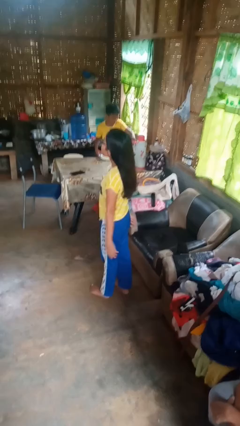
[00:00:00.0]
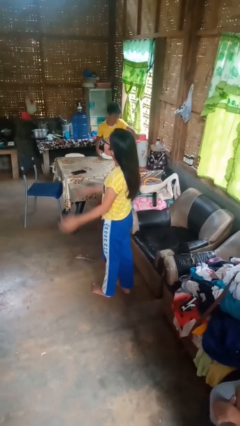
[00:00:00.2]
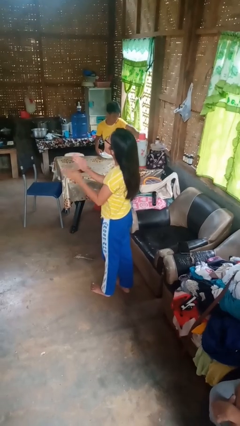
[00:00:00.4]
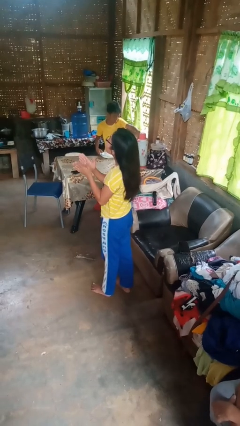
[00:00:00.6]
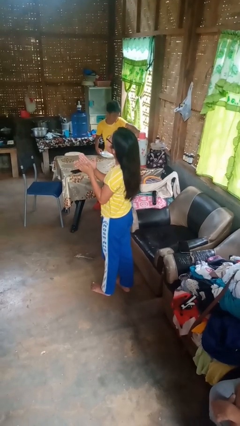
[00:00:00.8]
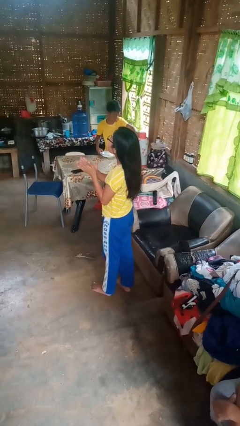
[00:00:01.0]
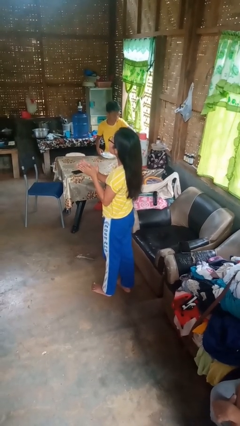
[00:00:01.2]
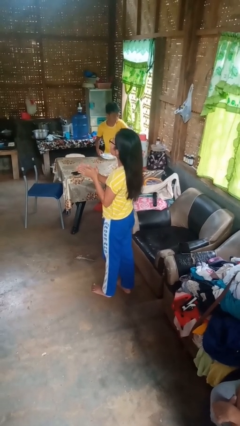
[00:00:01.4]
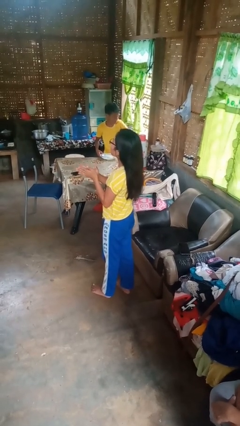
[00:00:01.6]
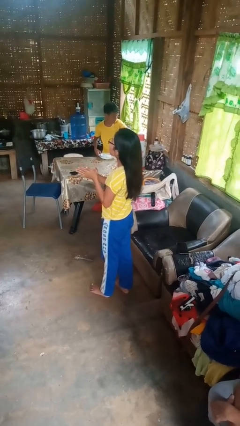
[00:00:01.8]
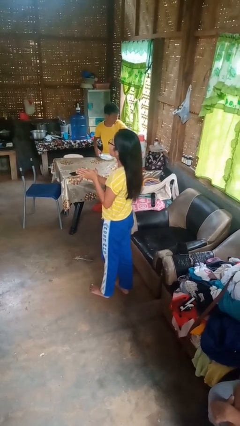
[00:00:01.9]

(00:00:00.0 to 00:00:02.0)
person claps hands

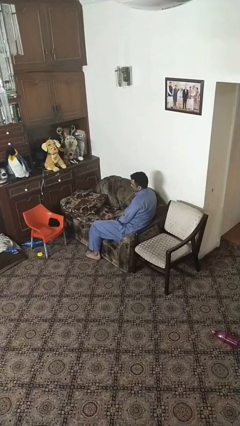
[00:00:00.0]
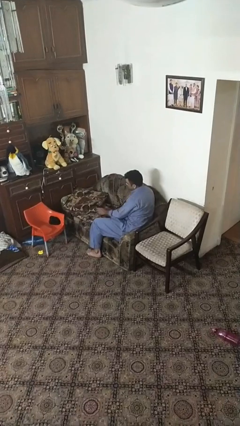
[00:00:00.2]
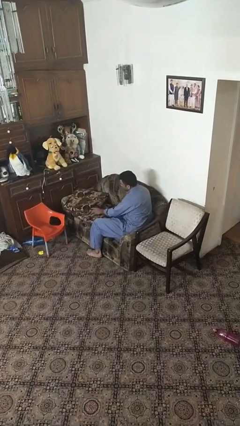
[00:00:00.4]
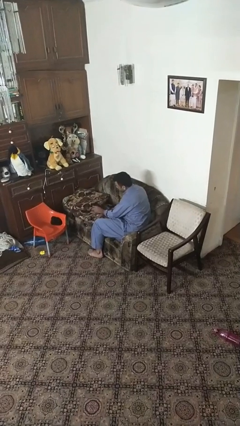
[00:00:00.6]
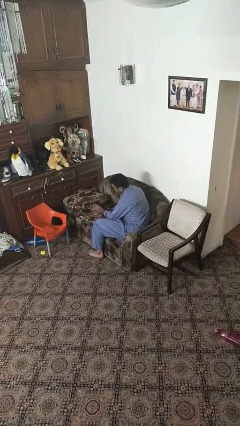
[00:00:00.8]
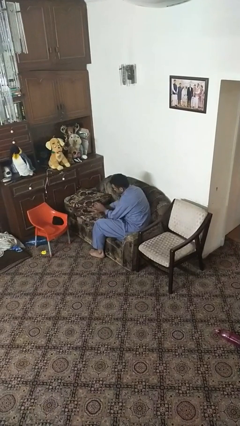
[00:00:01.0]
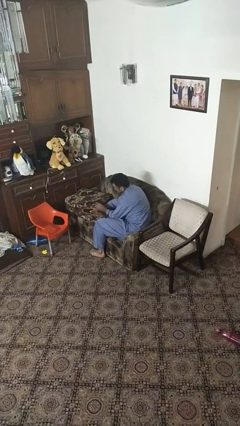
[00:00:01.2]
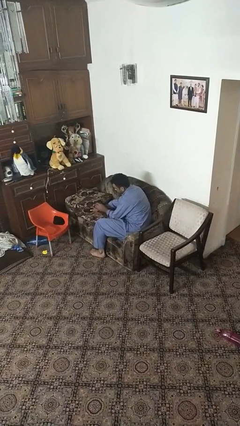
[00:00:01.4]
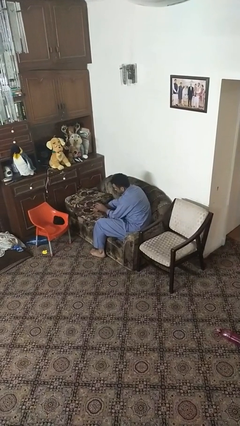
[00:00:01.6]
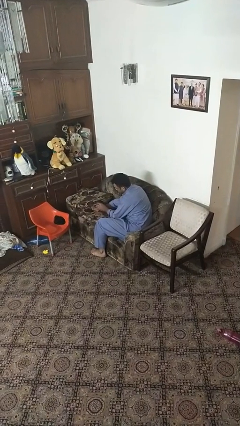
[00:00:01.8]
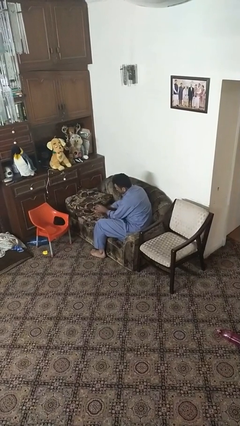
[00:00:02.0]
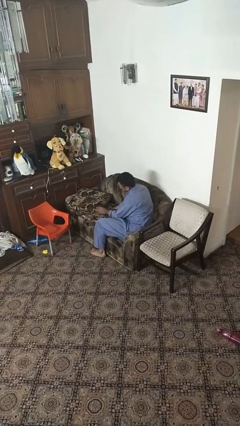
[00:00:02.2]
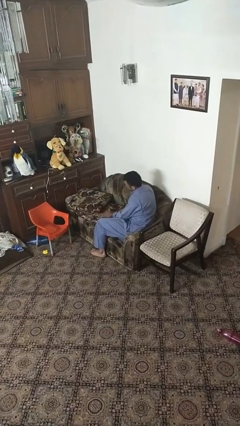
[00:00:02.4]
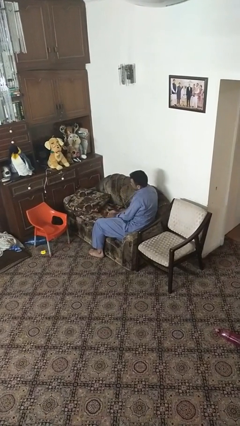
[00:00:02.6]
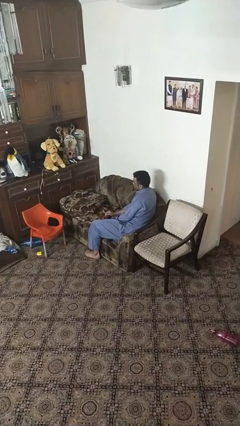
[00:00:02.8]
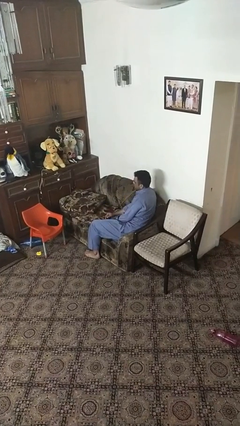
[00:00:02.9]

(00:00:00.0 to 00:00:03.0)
person searches in couch

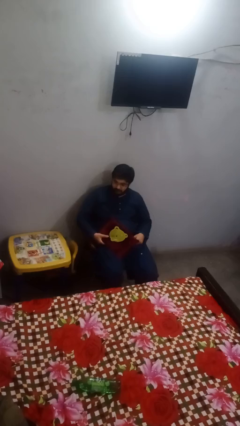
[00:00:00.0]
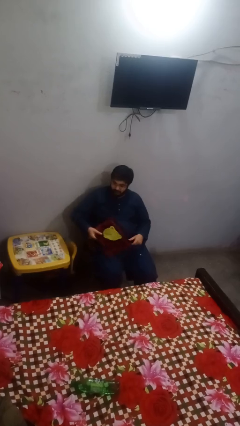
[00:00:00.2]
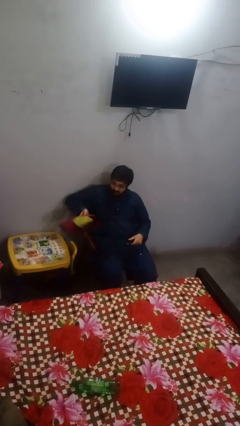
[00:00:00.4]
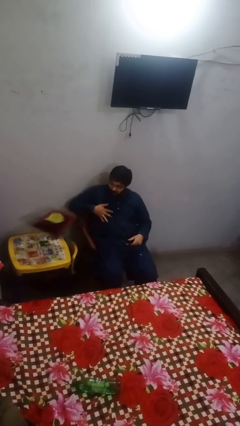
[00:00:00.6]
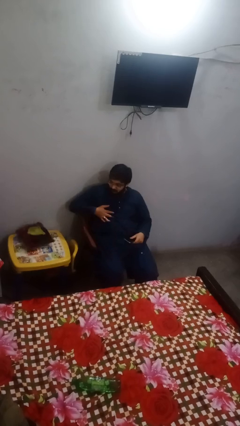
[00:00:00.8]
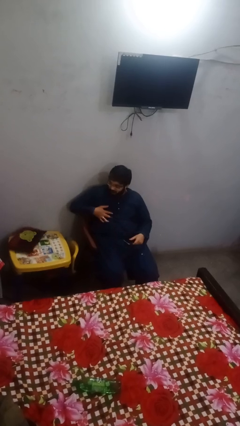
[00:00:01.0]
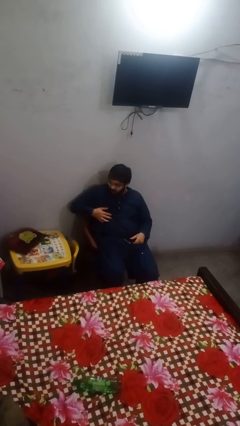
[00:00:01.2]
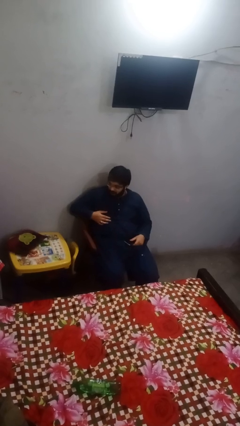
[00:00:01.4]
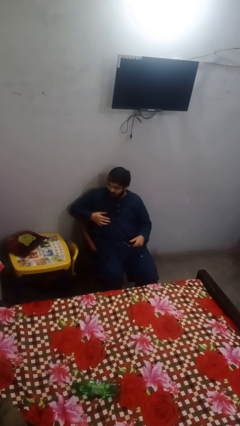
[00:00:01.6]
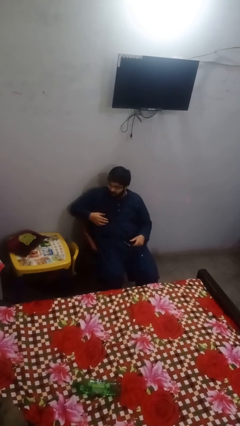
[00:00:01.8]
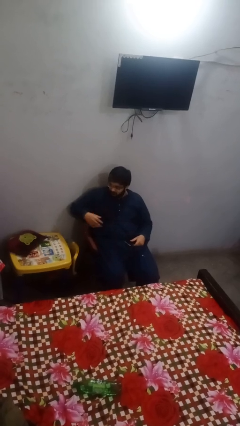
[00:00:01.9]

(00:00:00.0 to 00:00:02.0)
person throws object on table

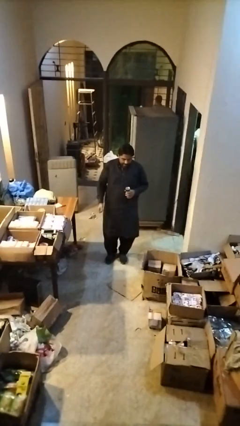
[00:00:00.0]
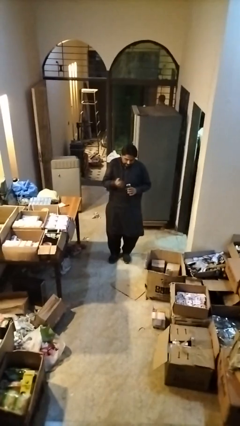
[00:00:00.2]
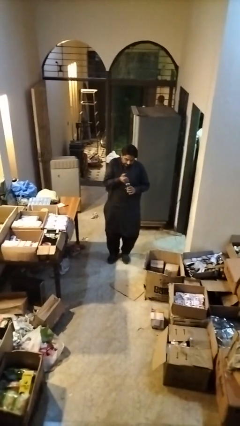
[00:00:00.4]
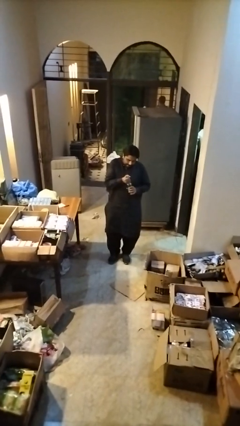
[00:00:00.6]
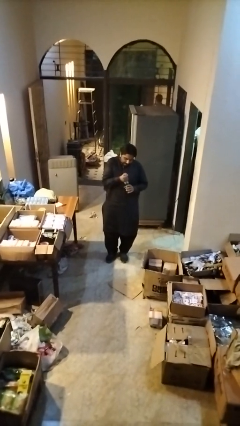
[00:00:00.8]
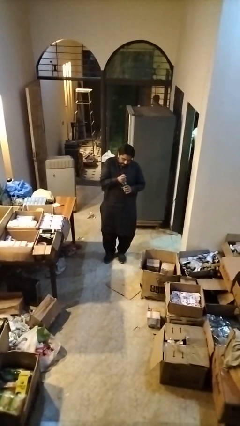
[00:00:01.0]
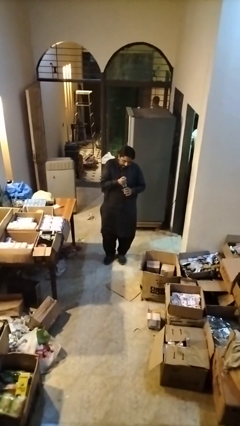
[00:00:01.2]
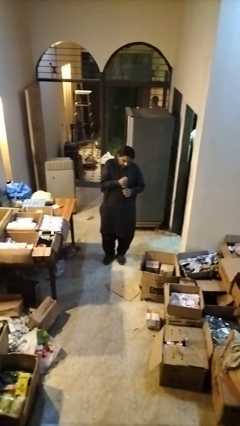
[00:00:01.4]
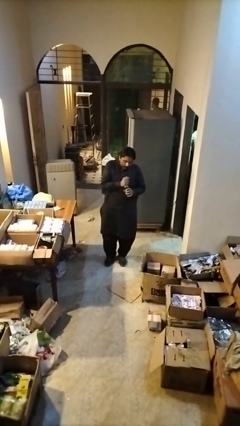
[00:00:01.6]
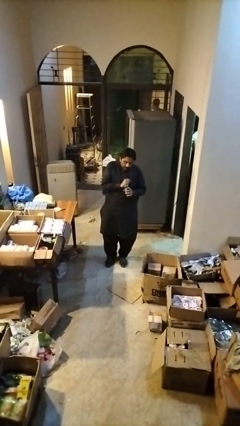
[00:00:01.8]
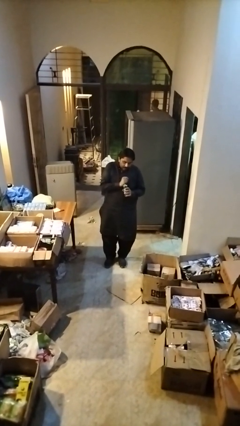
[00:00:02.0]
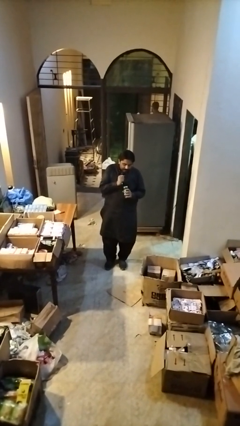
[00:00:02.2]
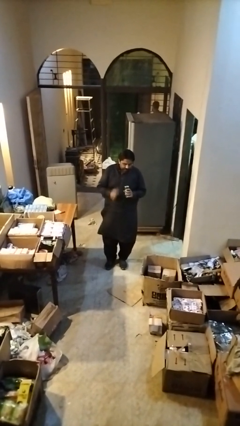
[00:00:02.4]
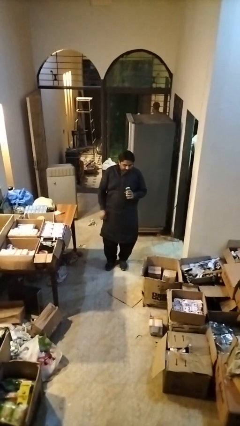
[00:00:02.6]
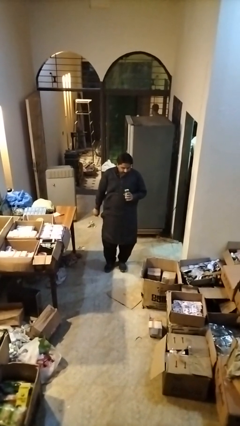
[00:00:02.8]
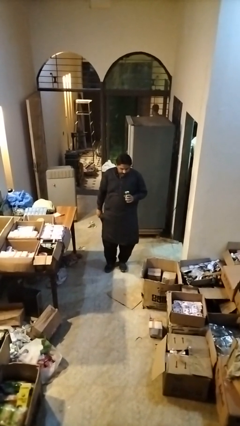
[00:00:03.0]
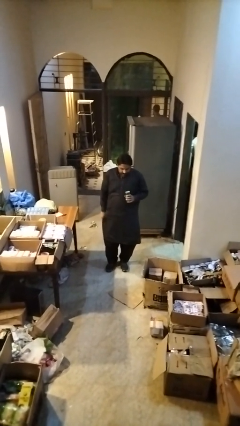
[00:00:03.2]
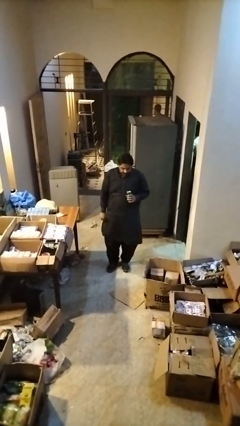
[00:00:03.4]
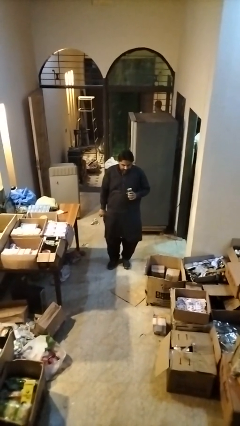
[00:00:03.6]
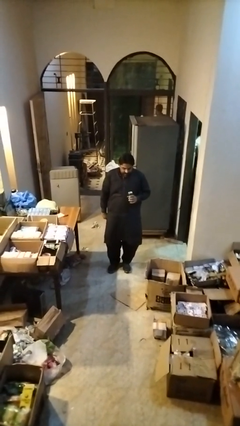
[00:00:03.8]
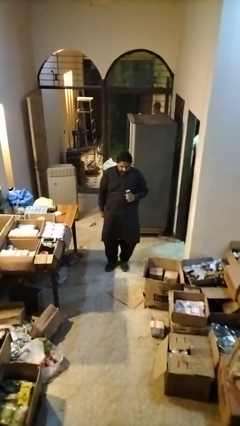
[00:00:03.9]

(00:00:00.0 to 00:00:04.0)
person opens can with can opener

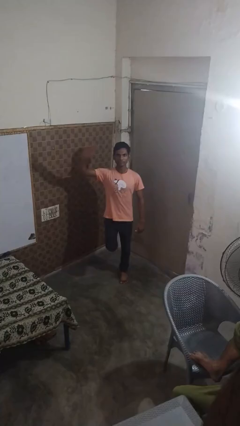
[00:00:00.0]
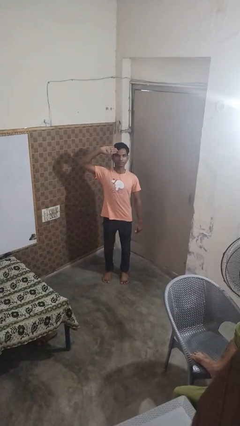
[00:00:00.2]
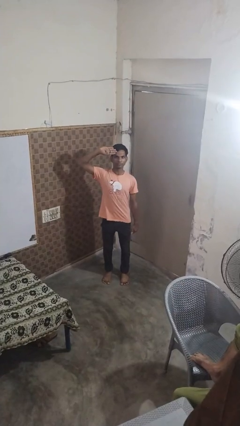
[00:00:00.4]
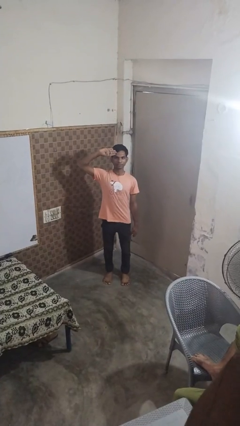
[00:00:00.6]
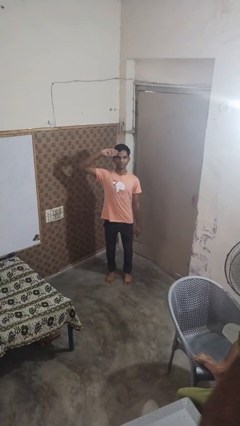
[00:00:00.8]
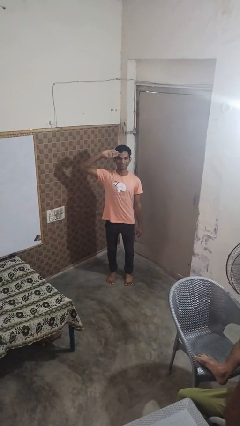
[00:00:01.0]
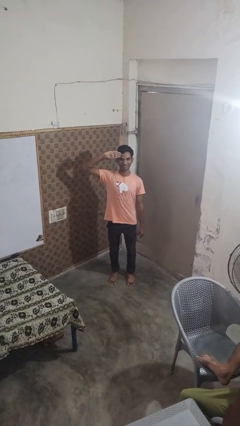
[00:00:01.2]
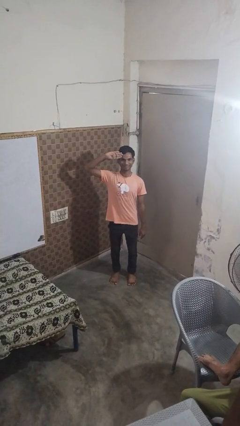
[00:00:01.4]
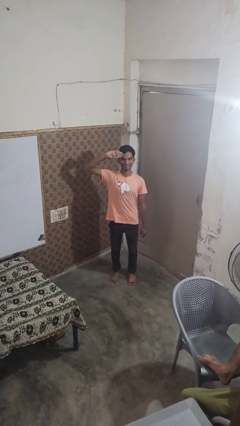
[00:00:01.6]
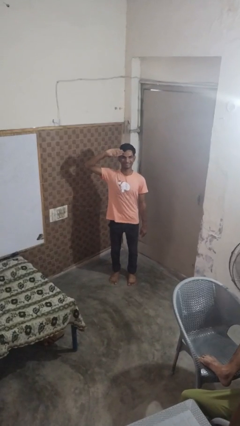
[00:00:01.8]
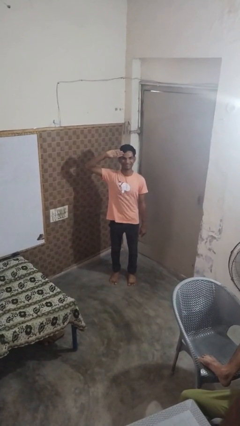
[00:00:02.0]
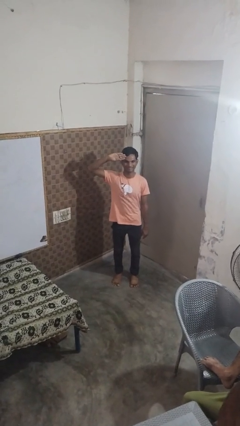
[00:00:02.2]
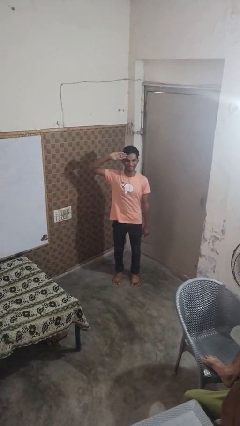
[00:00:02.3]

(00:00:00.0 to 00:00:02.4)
person salutes

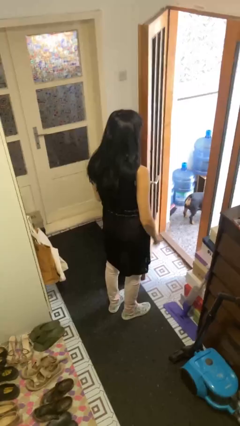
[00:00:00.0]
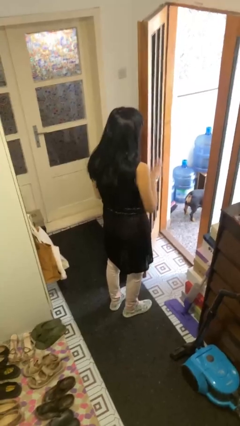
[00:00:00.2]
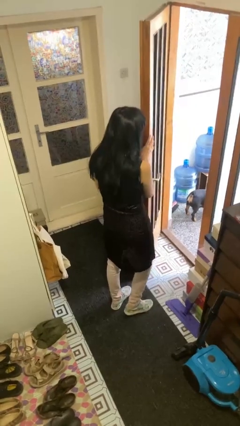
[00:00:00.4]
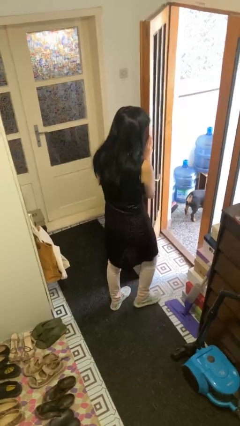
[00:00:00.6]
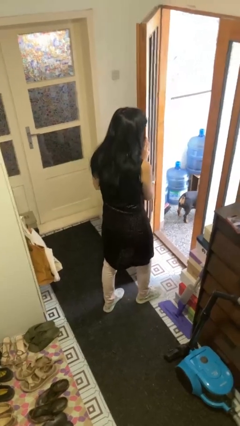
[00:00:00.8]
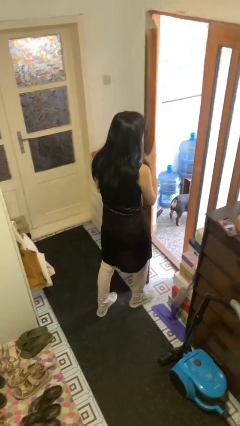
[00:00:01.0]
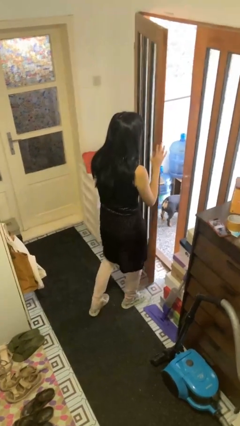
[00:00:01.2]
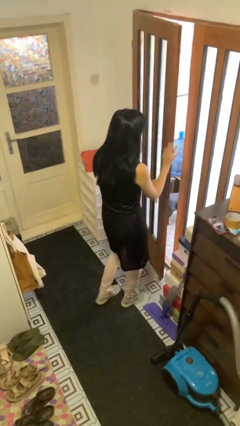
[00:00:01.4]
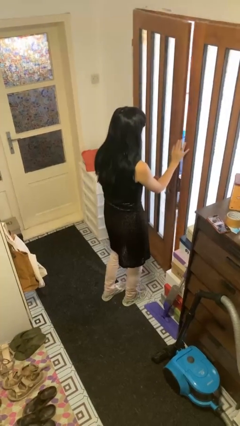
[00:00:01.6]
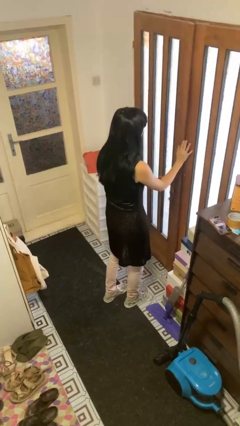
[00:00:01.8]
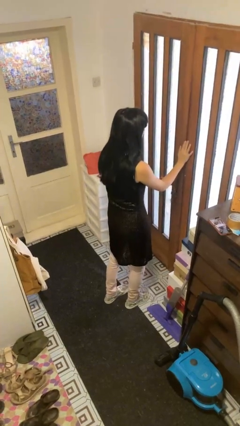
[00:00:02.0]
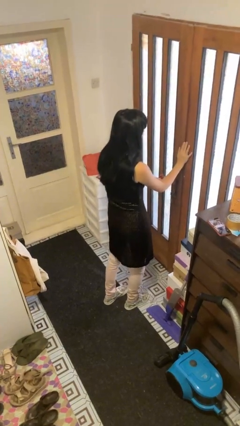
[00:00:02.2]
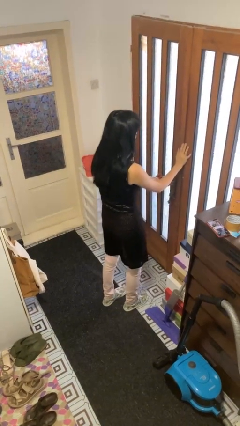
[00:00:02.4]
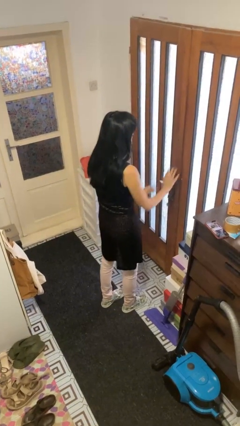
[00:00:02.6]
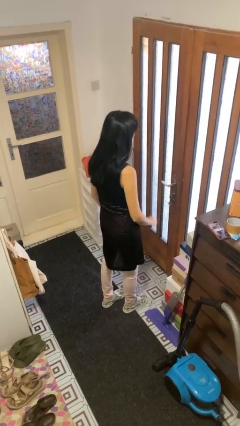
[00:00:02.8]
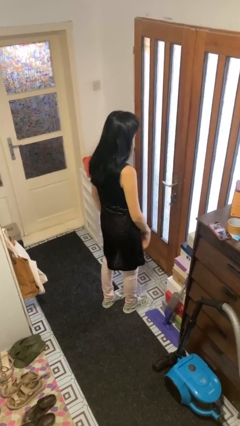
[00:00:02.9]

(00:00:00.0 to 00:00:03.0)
person closes facility door

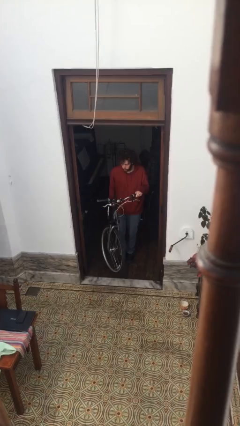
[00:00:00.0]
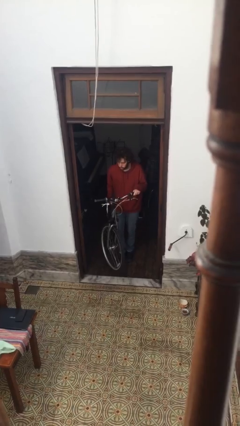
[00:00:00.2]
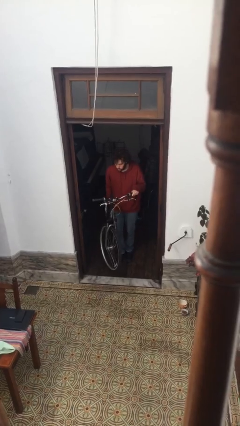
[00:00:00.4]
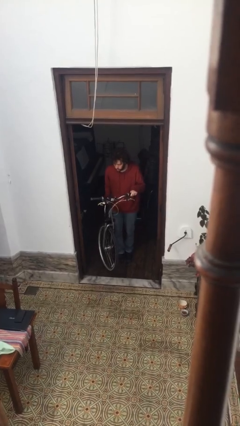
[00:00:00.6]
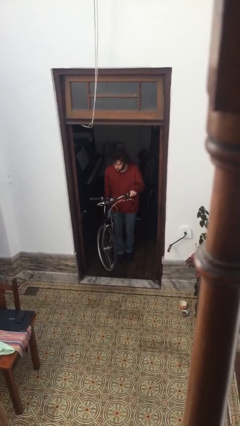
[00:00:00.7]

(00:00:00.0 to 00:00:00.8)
person carries bicycle
